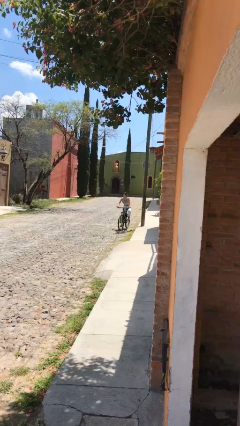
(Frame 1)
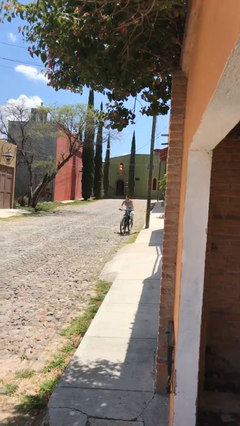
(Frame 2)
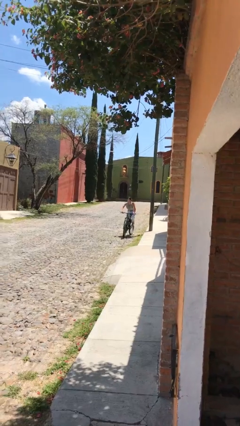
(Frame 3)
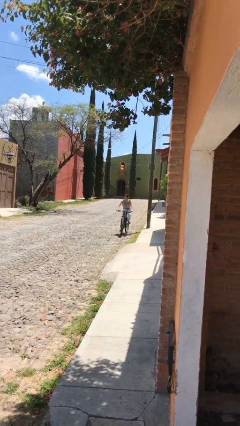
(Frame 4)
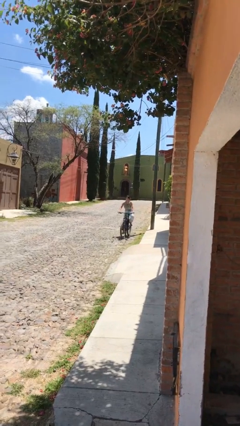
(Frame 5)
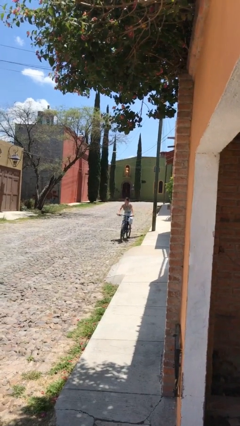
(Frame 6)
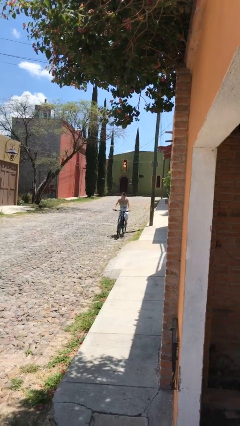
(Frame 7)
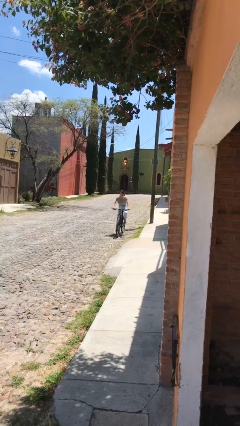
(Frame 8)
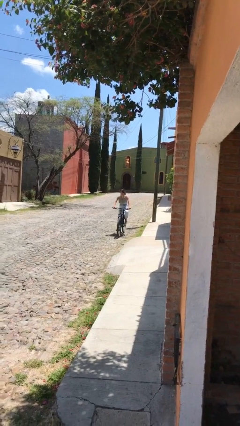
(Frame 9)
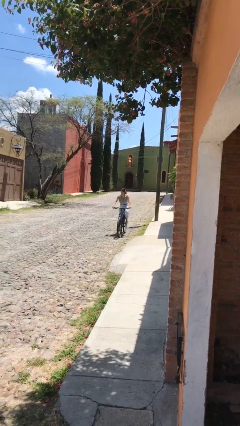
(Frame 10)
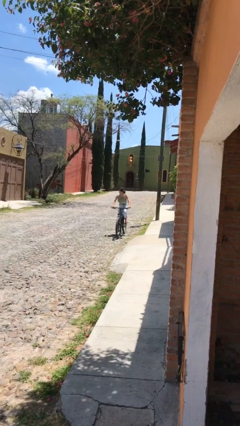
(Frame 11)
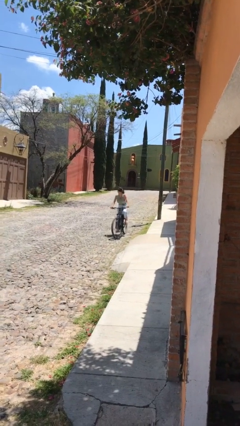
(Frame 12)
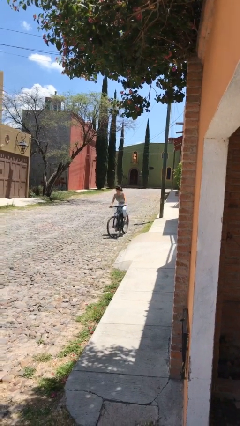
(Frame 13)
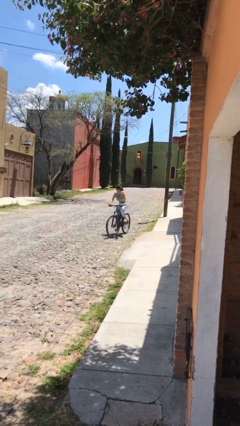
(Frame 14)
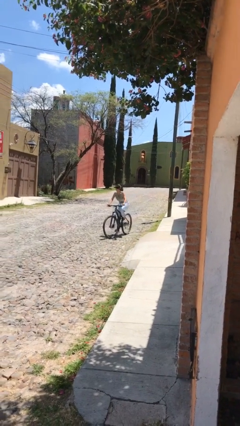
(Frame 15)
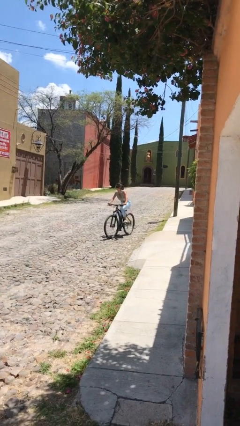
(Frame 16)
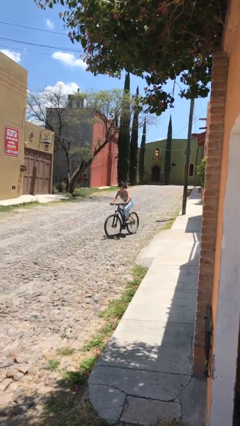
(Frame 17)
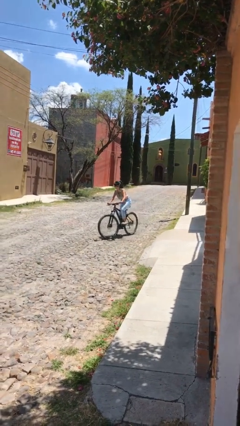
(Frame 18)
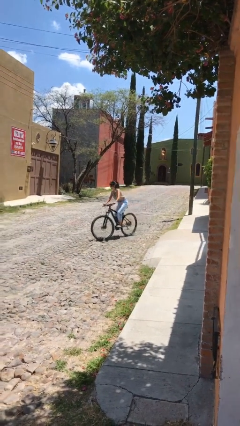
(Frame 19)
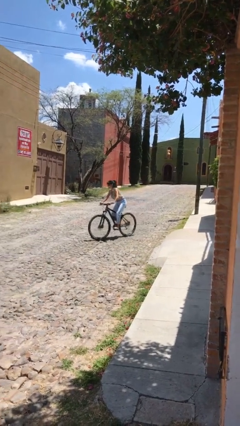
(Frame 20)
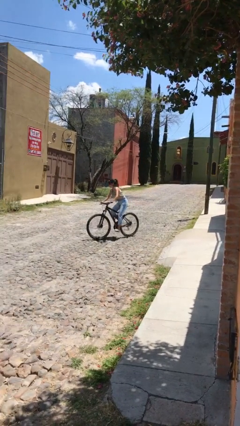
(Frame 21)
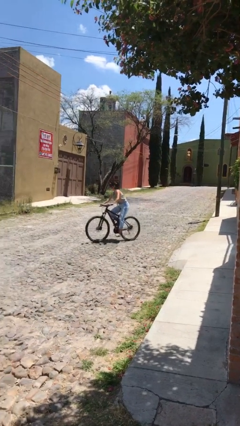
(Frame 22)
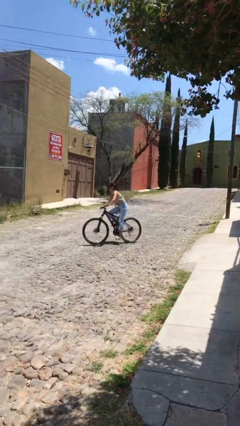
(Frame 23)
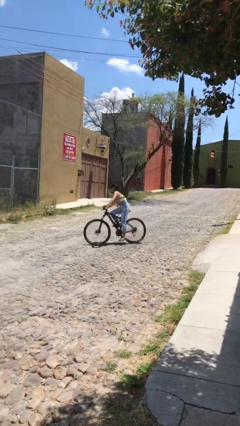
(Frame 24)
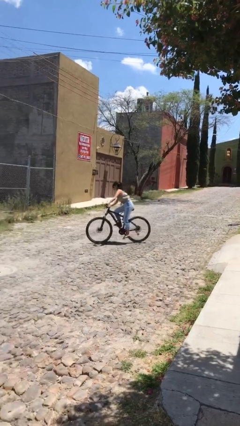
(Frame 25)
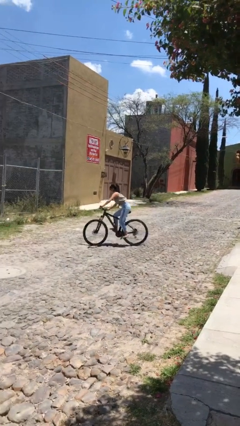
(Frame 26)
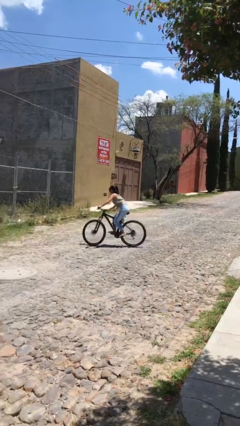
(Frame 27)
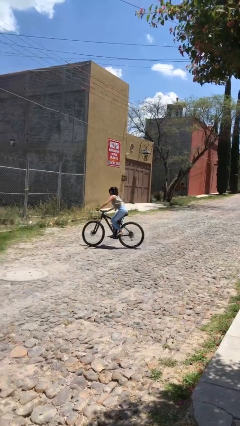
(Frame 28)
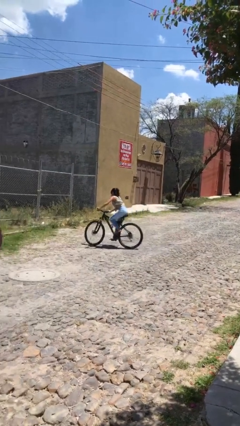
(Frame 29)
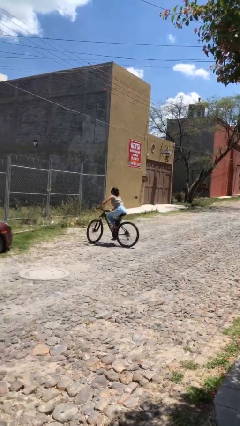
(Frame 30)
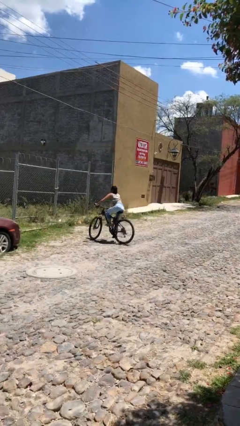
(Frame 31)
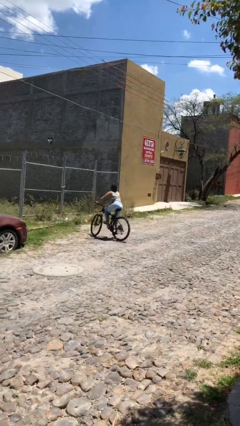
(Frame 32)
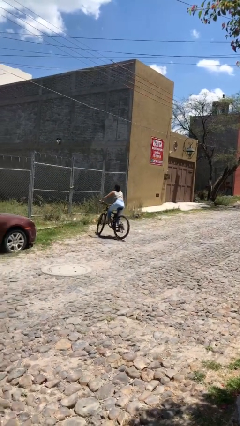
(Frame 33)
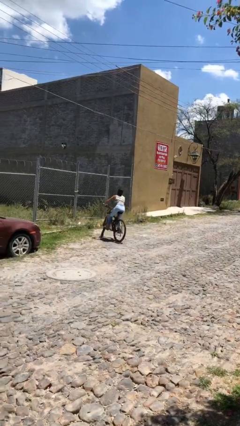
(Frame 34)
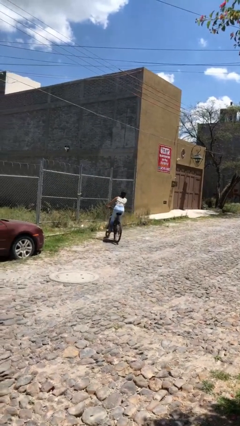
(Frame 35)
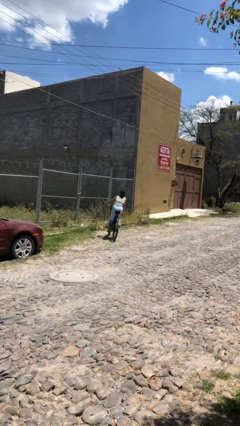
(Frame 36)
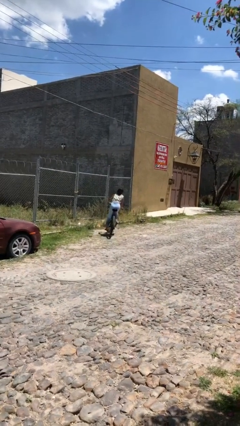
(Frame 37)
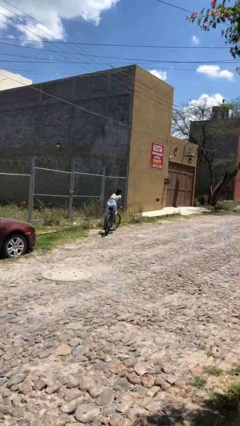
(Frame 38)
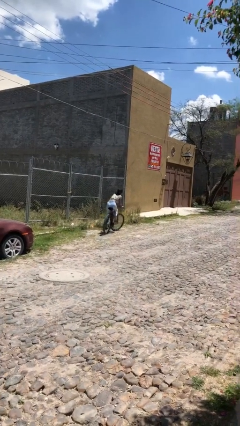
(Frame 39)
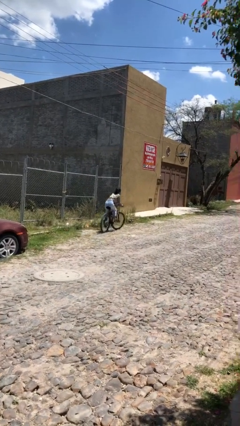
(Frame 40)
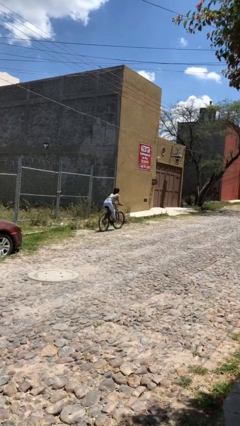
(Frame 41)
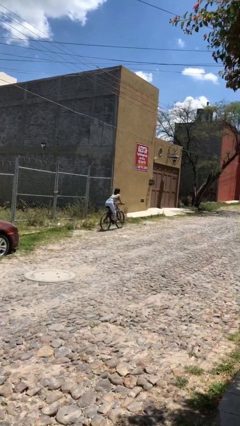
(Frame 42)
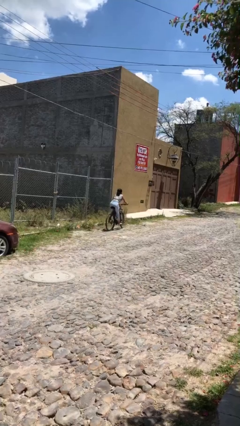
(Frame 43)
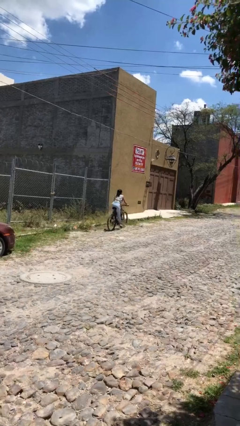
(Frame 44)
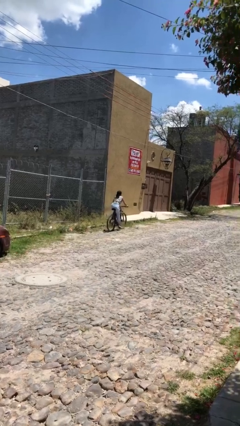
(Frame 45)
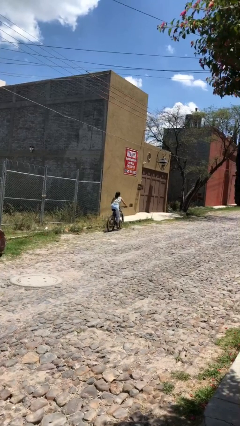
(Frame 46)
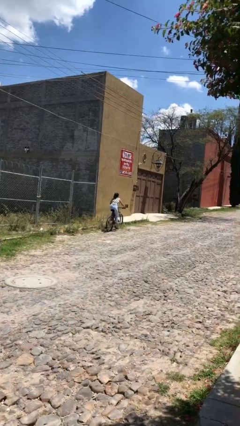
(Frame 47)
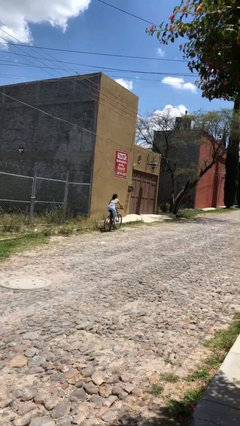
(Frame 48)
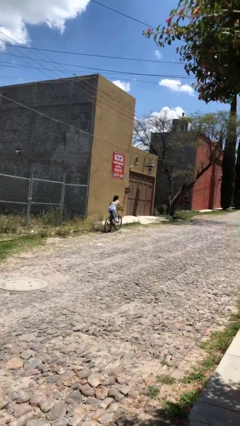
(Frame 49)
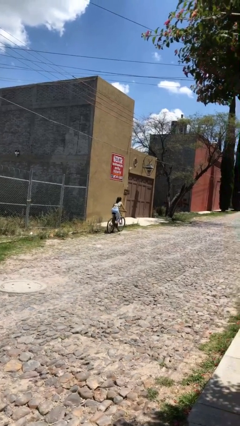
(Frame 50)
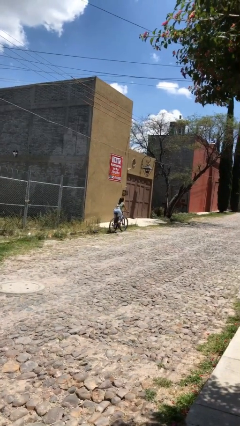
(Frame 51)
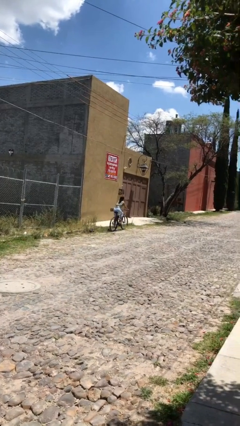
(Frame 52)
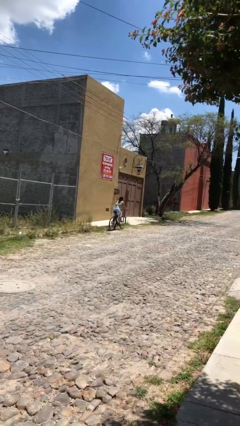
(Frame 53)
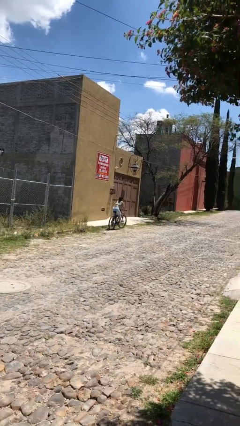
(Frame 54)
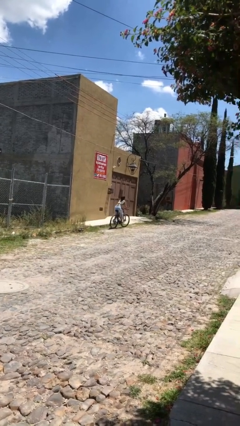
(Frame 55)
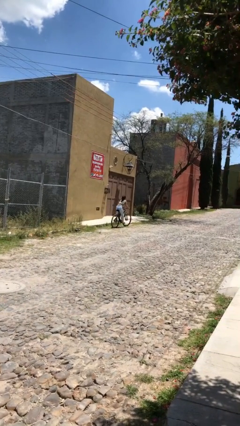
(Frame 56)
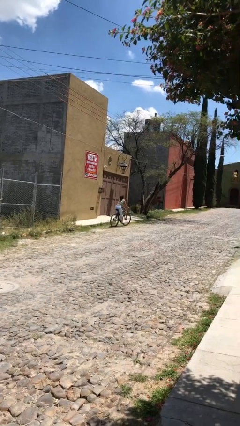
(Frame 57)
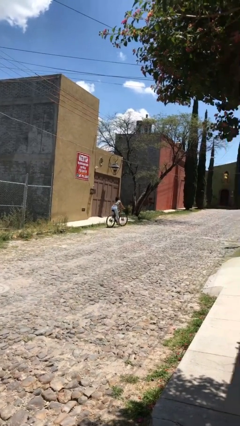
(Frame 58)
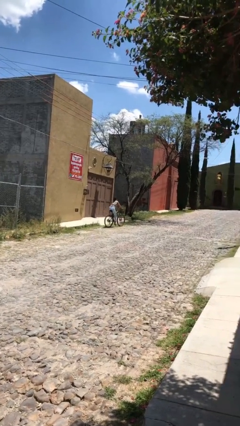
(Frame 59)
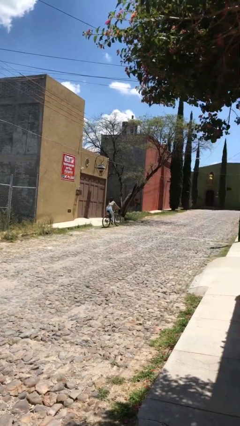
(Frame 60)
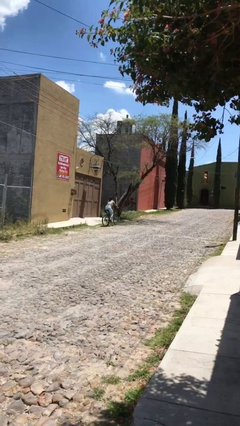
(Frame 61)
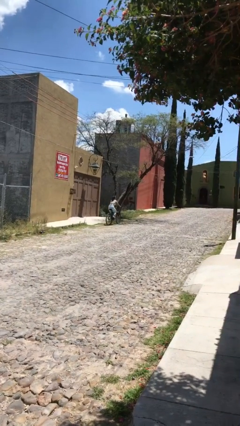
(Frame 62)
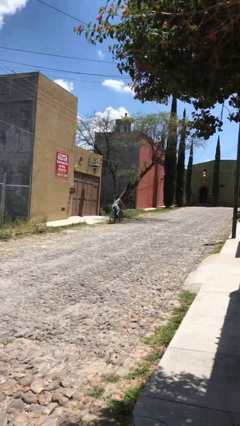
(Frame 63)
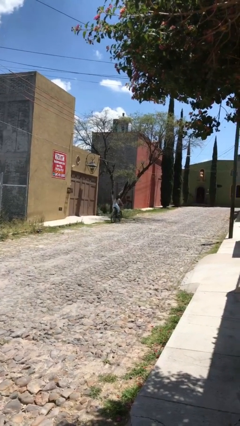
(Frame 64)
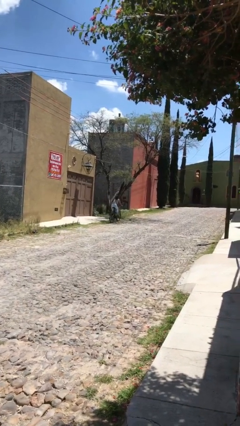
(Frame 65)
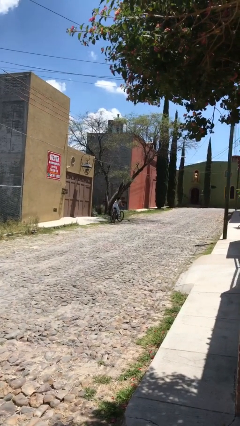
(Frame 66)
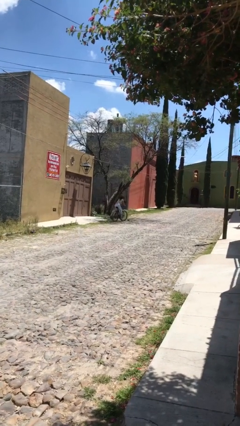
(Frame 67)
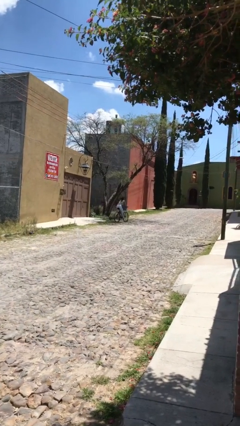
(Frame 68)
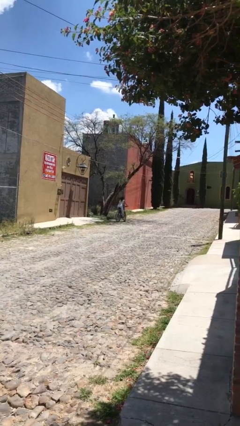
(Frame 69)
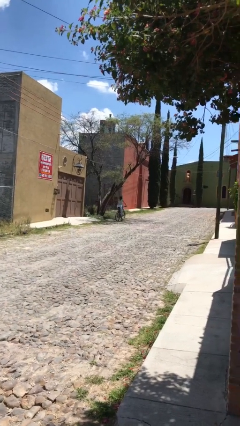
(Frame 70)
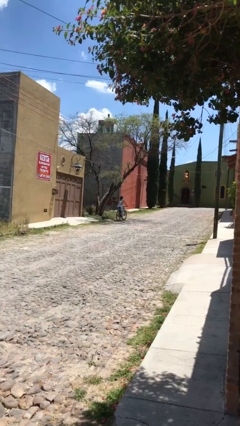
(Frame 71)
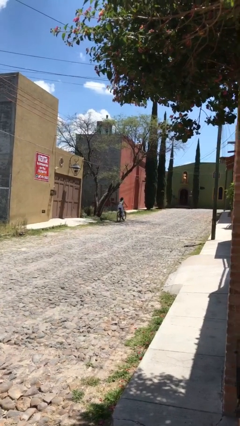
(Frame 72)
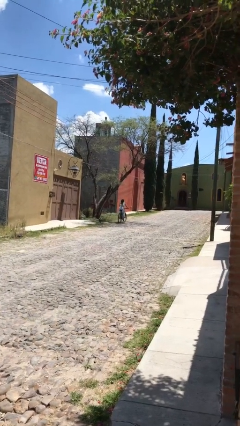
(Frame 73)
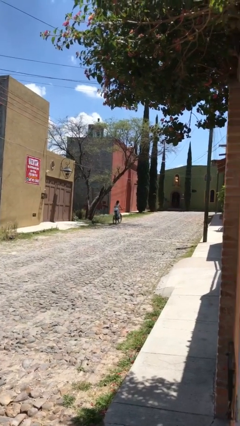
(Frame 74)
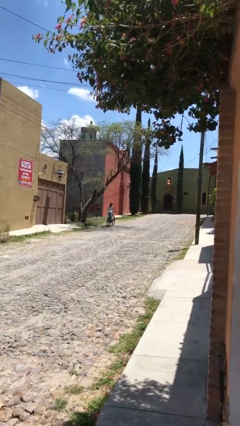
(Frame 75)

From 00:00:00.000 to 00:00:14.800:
person rides bicycle

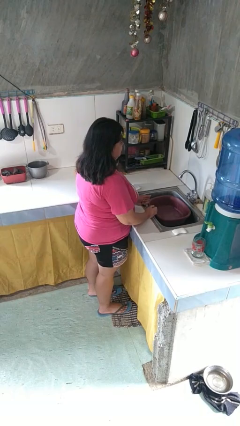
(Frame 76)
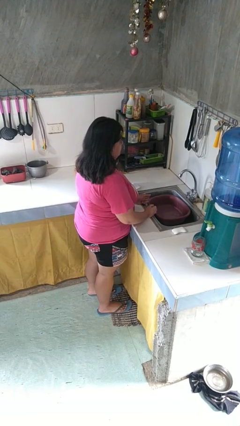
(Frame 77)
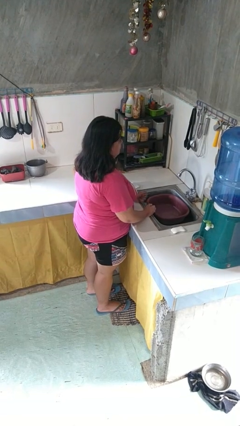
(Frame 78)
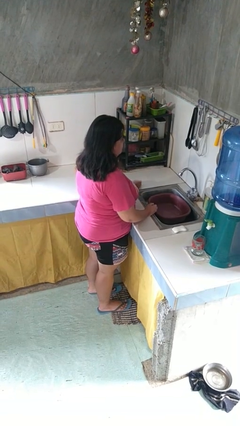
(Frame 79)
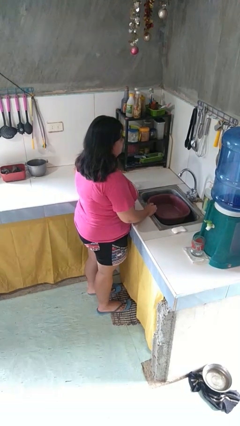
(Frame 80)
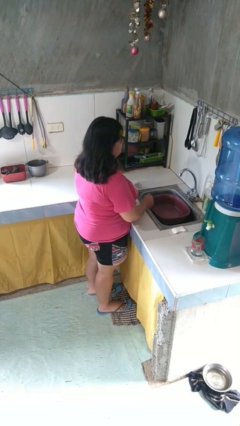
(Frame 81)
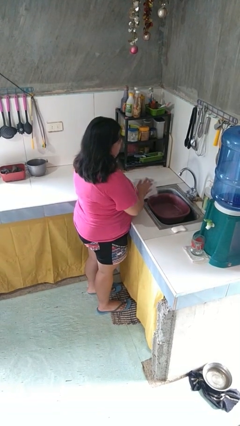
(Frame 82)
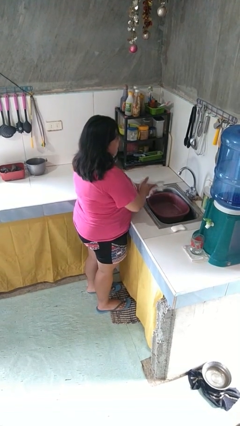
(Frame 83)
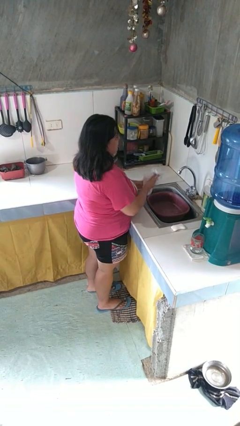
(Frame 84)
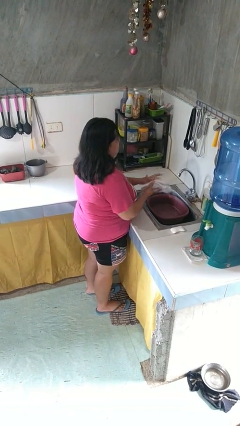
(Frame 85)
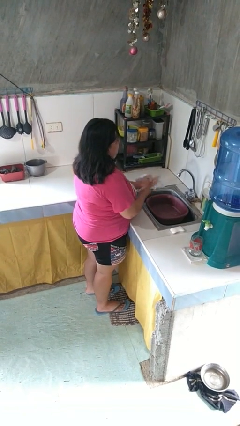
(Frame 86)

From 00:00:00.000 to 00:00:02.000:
person dries hands with towel

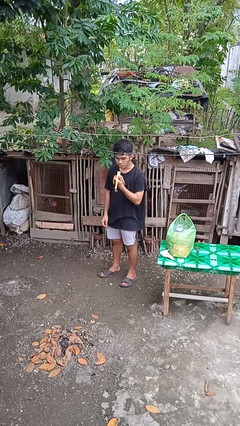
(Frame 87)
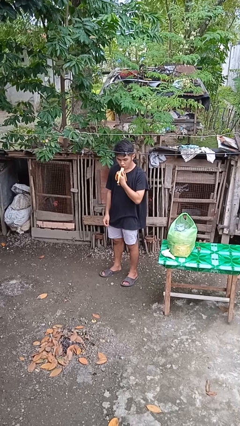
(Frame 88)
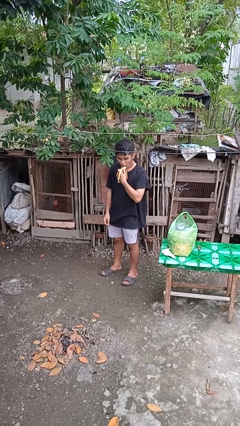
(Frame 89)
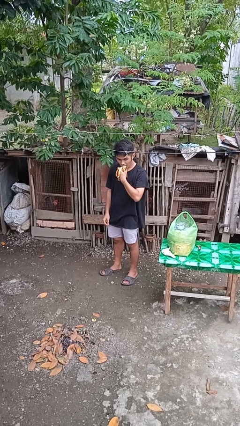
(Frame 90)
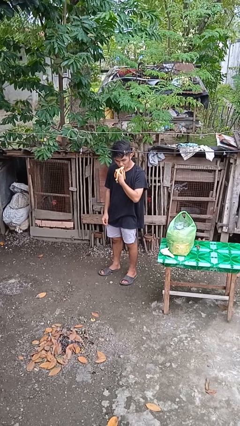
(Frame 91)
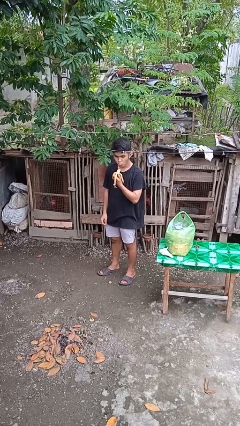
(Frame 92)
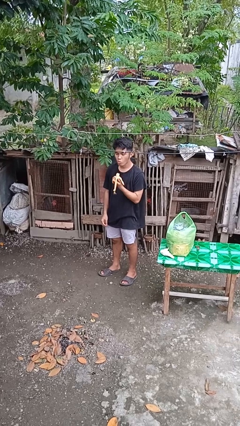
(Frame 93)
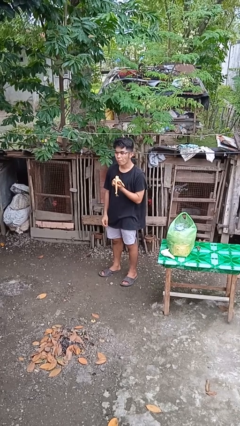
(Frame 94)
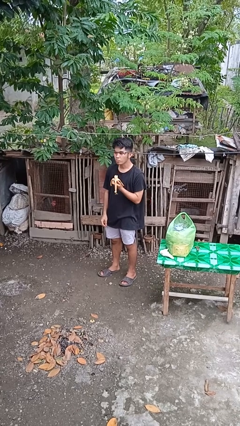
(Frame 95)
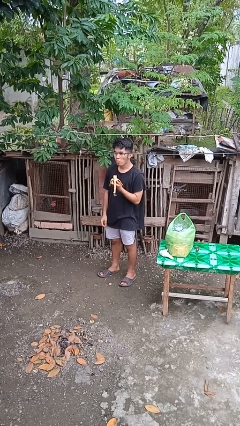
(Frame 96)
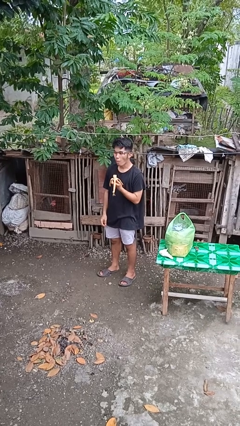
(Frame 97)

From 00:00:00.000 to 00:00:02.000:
person eats banana
